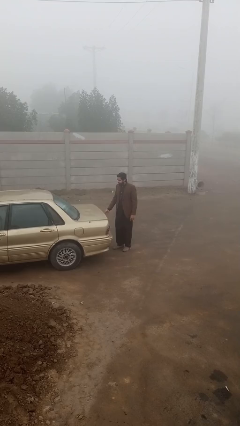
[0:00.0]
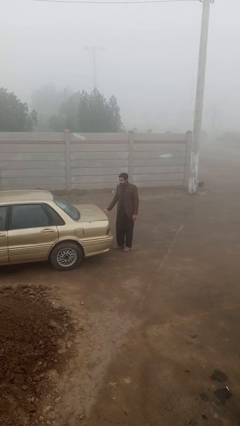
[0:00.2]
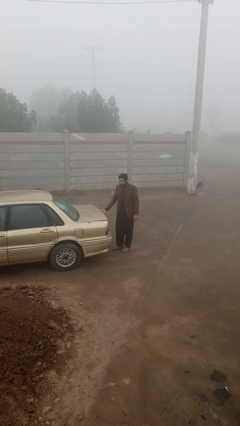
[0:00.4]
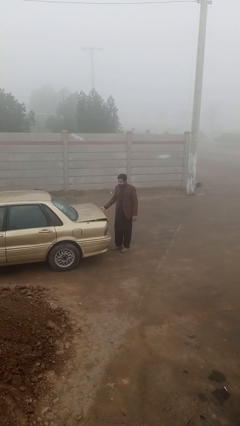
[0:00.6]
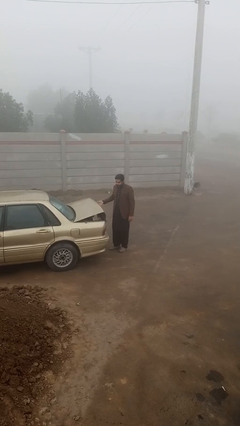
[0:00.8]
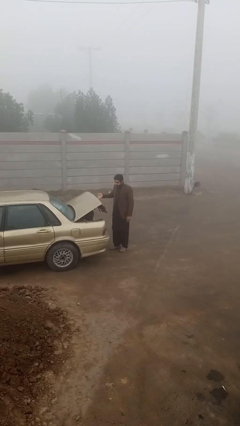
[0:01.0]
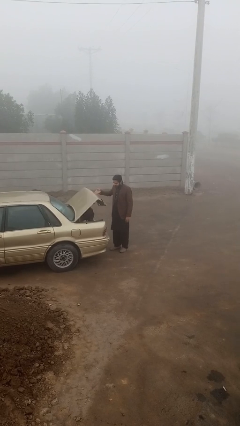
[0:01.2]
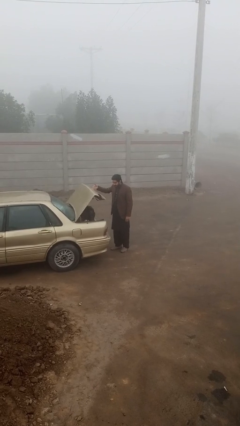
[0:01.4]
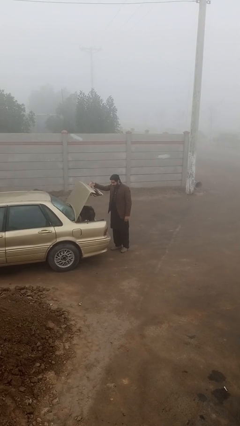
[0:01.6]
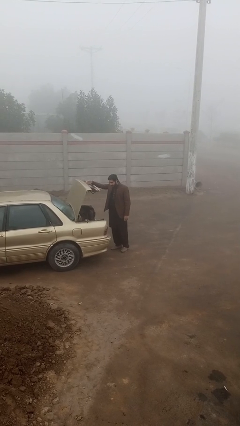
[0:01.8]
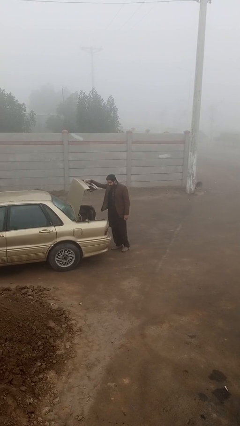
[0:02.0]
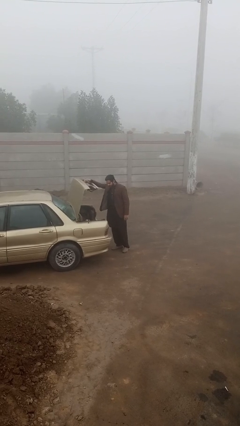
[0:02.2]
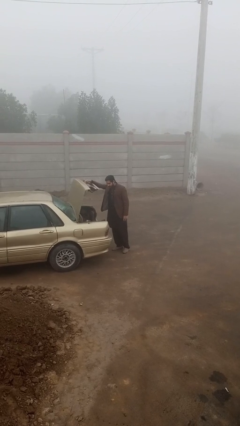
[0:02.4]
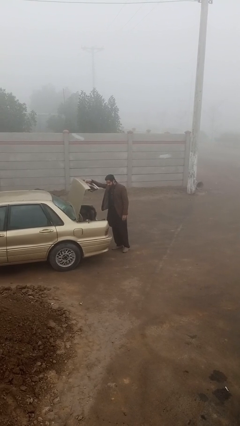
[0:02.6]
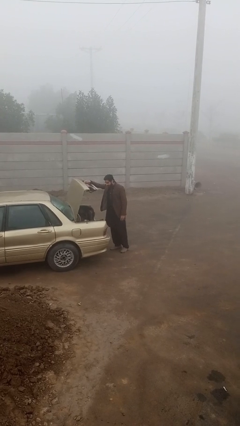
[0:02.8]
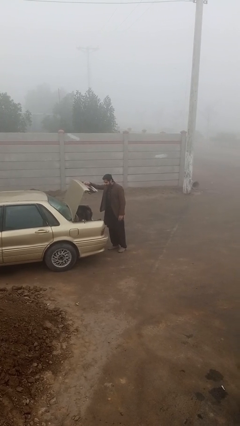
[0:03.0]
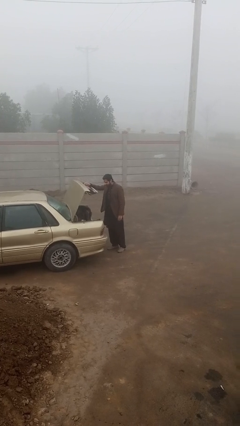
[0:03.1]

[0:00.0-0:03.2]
person opens car trunk

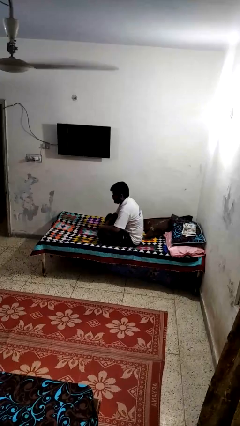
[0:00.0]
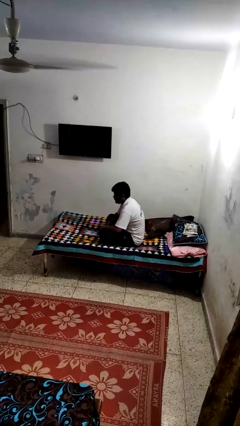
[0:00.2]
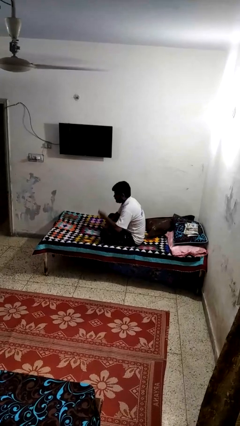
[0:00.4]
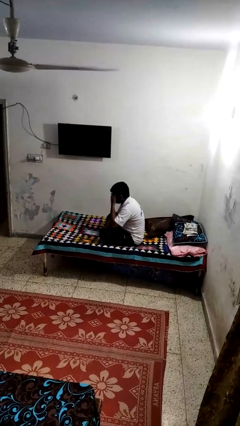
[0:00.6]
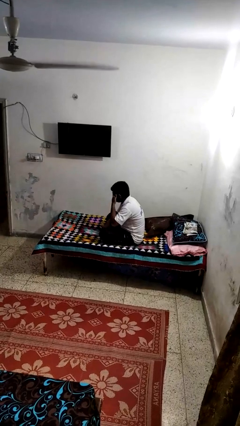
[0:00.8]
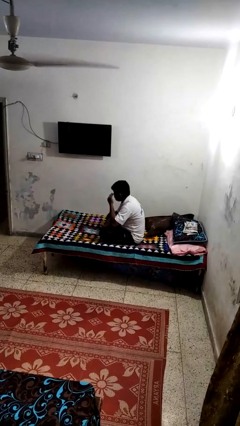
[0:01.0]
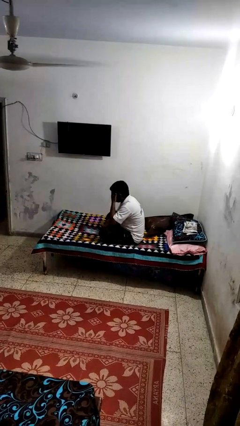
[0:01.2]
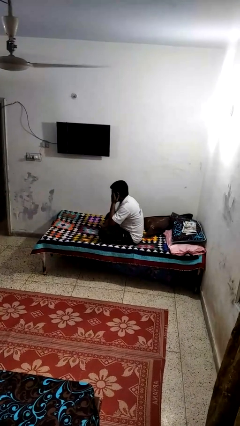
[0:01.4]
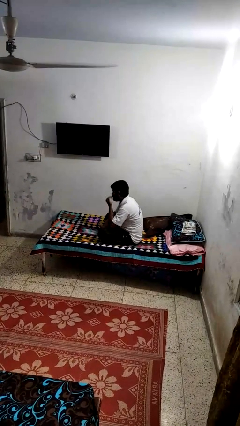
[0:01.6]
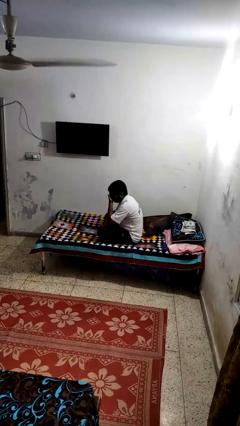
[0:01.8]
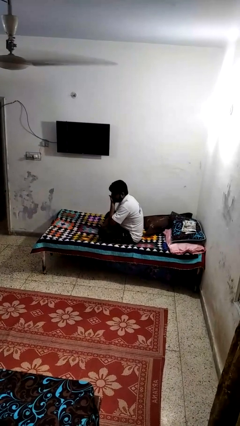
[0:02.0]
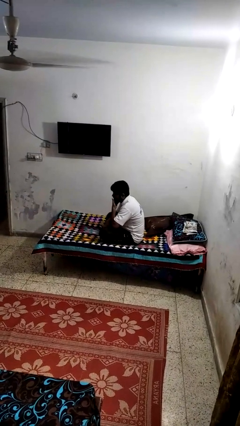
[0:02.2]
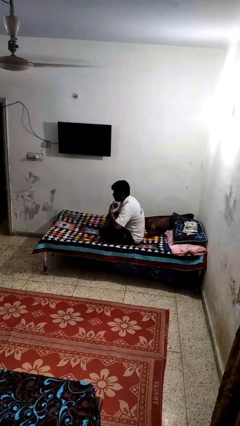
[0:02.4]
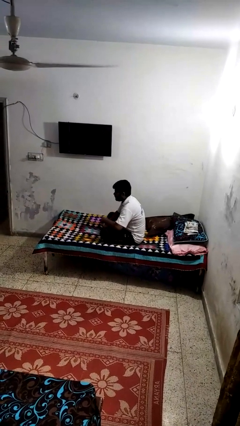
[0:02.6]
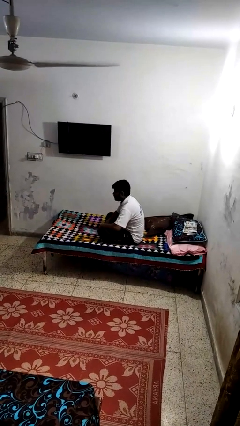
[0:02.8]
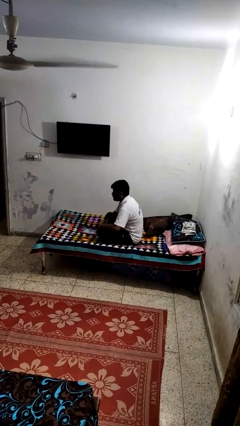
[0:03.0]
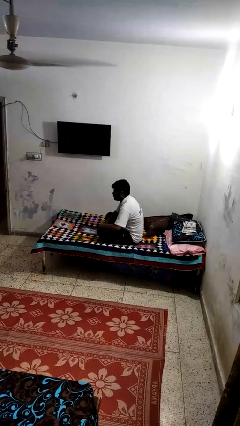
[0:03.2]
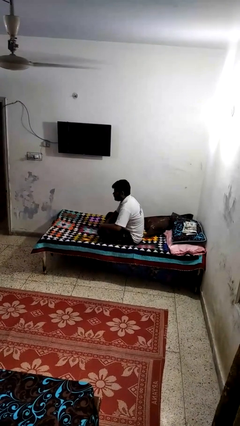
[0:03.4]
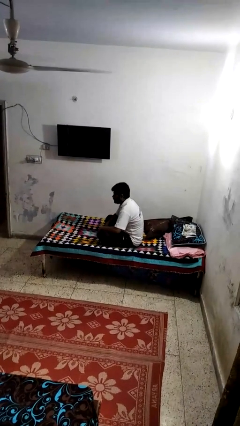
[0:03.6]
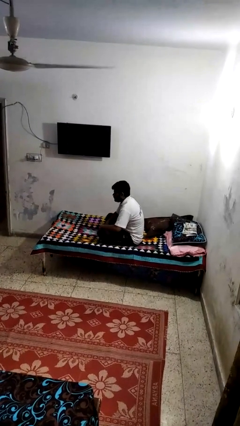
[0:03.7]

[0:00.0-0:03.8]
person scratches face

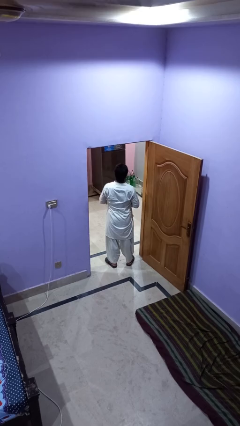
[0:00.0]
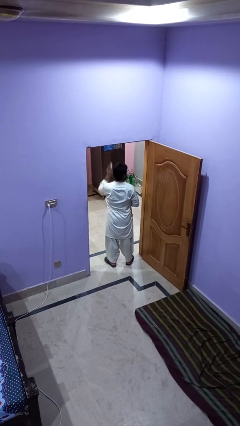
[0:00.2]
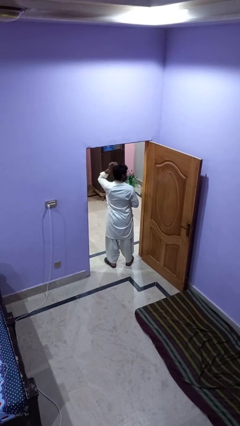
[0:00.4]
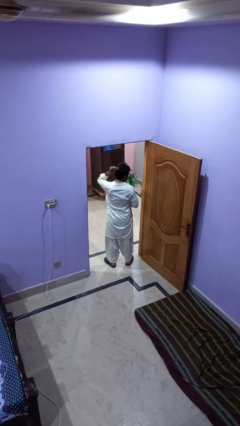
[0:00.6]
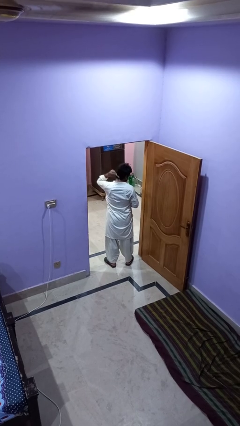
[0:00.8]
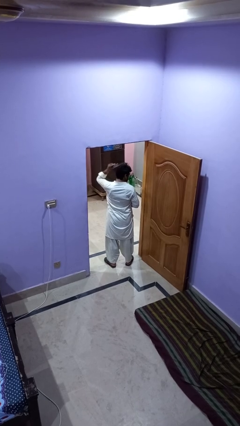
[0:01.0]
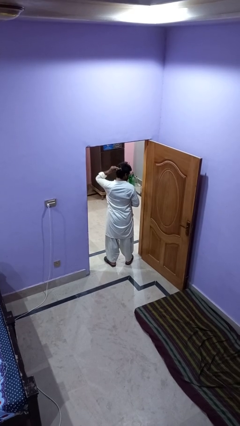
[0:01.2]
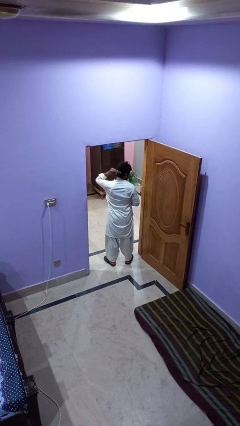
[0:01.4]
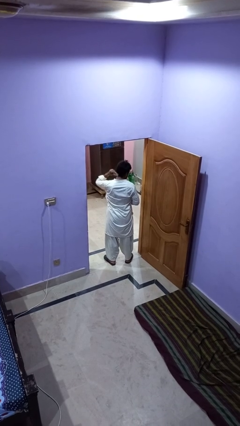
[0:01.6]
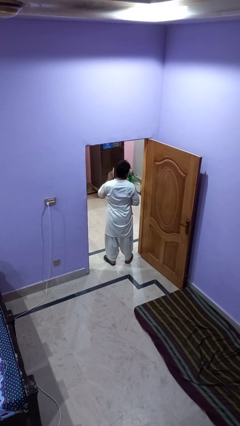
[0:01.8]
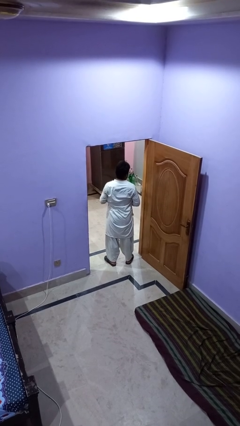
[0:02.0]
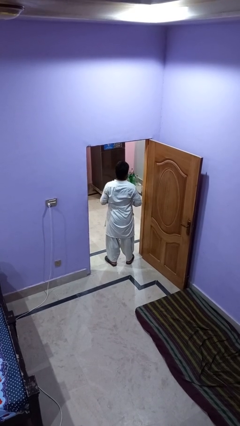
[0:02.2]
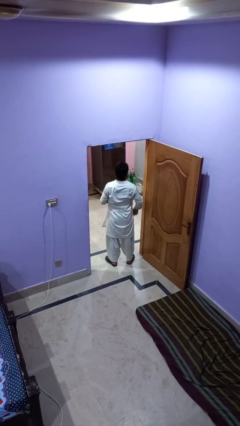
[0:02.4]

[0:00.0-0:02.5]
person brushes hair

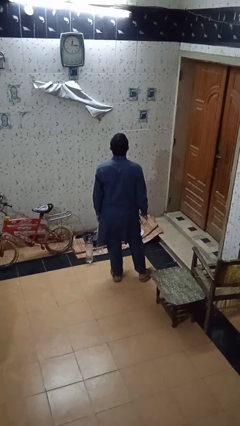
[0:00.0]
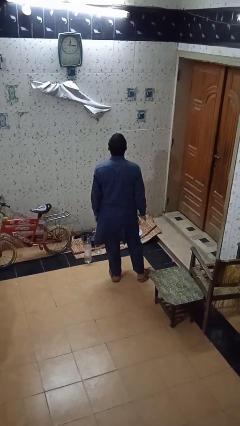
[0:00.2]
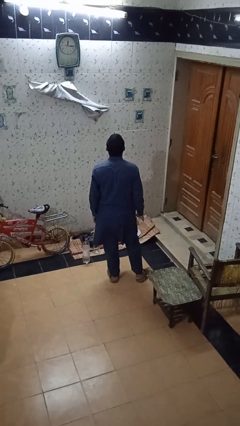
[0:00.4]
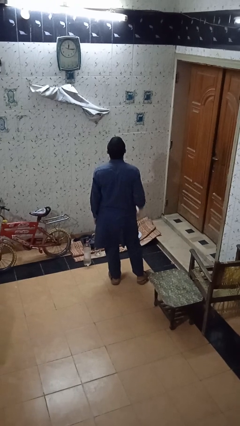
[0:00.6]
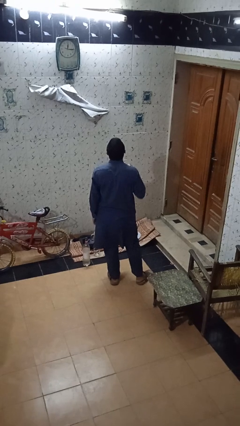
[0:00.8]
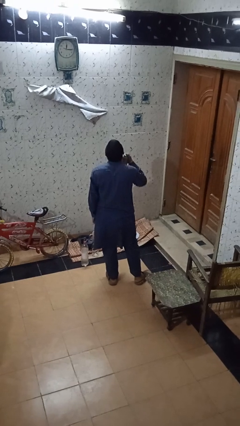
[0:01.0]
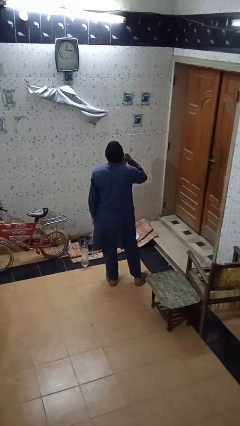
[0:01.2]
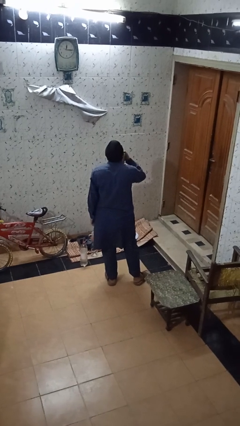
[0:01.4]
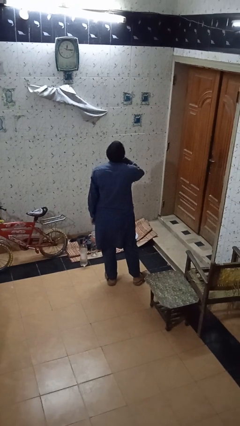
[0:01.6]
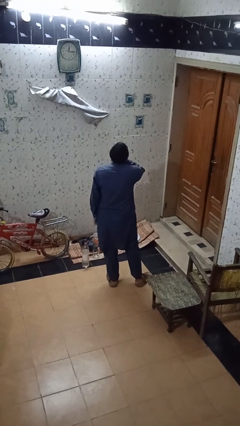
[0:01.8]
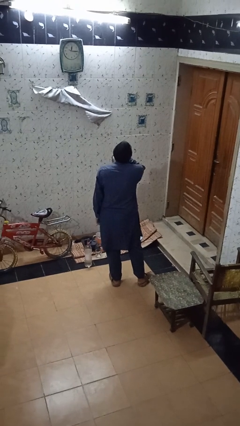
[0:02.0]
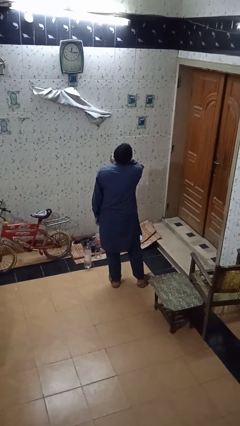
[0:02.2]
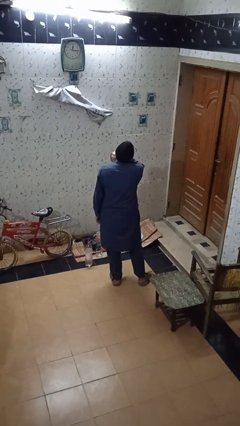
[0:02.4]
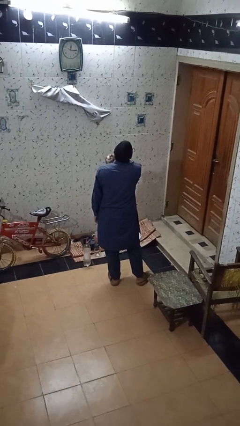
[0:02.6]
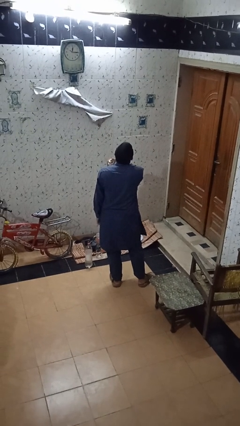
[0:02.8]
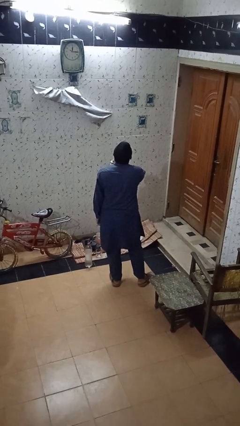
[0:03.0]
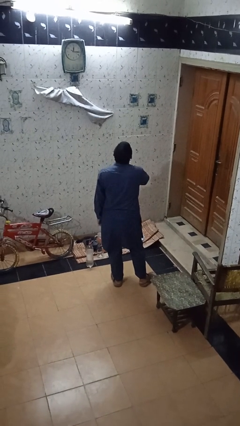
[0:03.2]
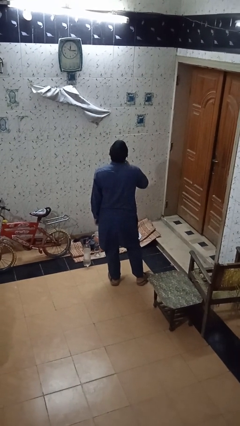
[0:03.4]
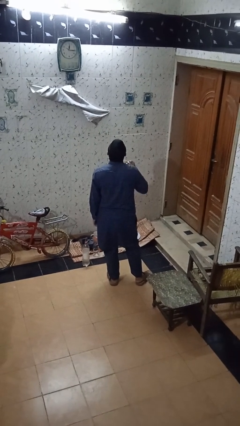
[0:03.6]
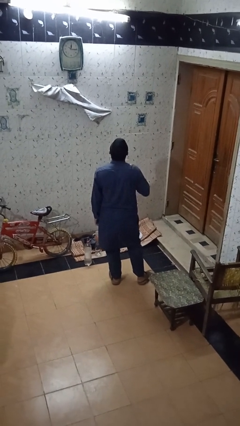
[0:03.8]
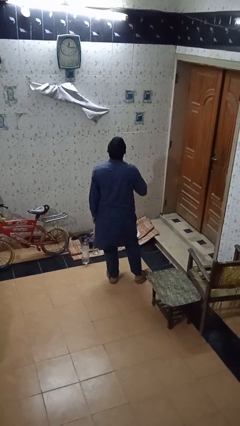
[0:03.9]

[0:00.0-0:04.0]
person applies deodorant

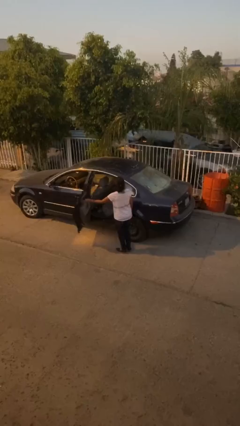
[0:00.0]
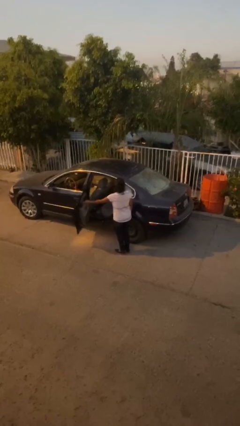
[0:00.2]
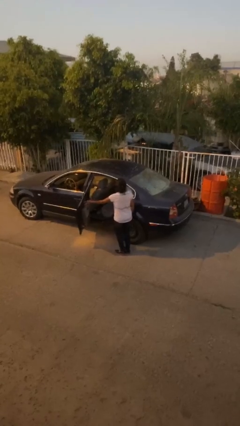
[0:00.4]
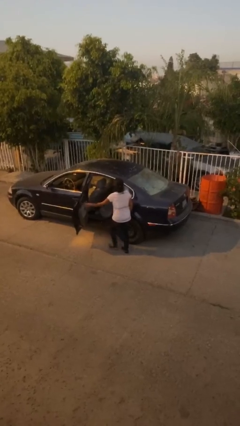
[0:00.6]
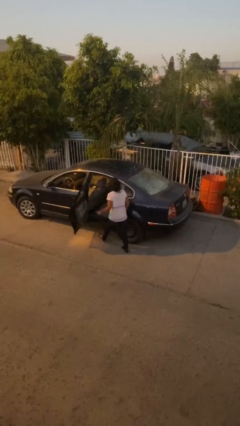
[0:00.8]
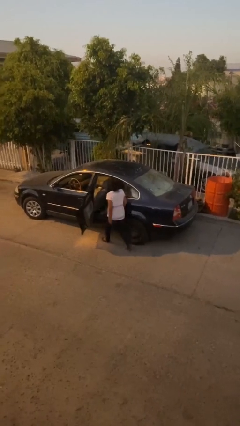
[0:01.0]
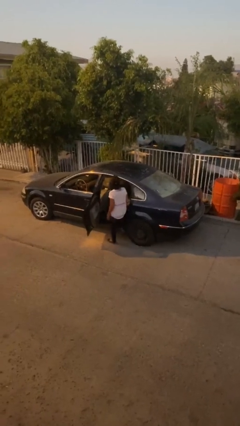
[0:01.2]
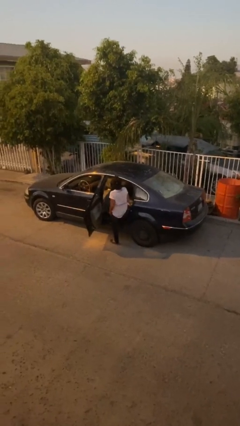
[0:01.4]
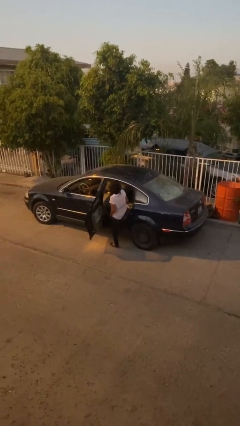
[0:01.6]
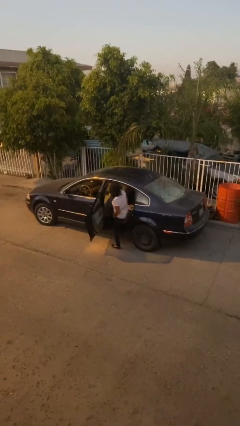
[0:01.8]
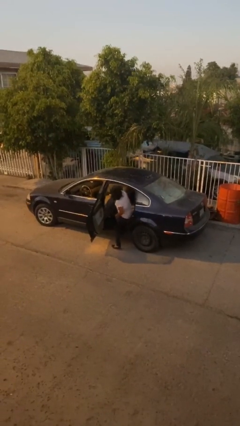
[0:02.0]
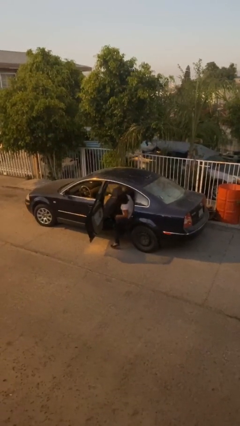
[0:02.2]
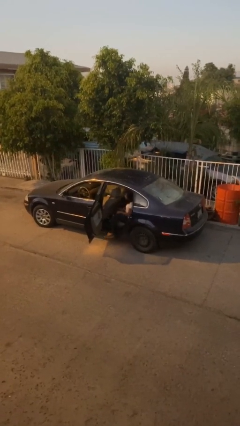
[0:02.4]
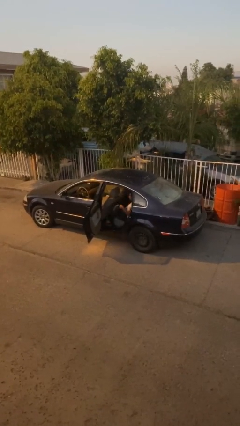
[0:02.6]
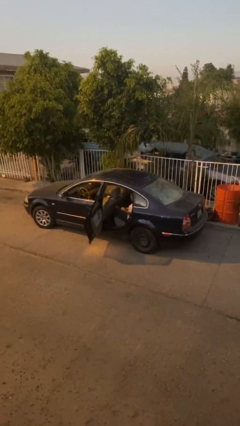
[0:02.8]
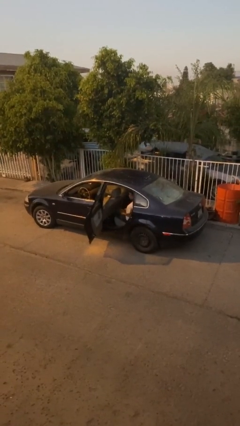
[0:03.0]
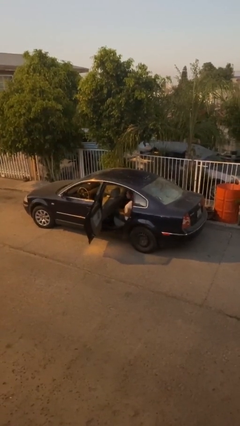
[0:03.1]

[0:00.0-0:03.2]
person enters car

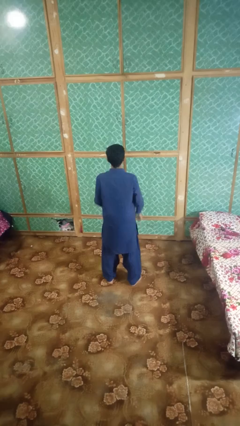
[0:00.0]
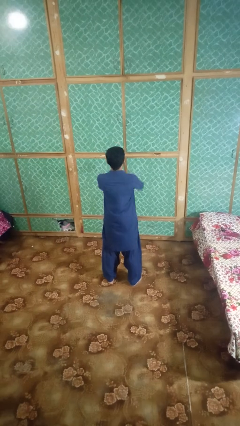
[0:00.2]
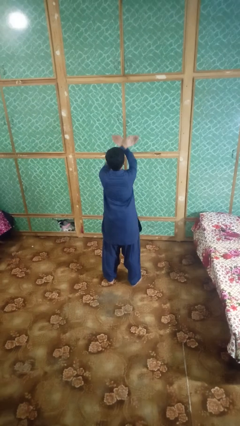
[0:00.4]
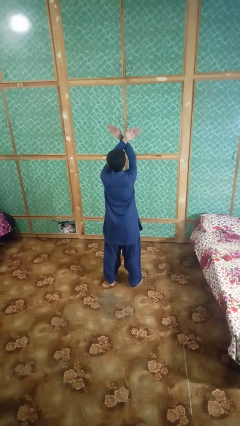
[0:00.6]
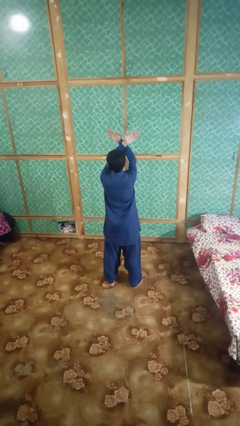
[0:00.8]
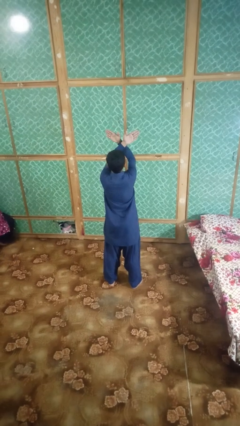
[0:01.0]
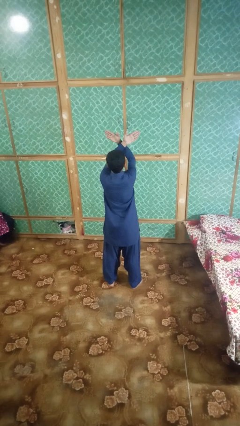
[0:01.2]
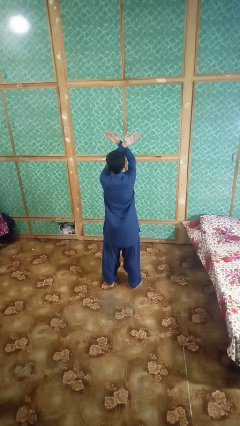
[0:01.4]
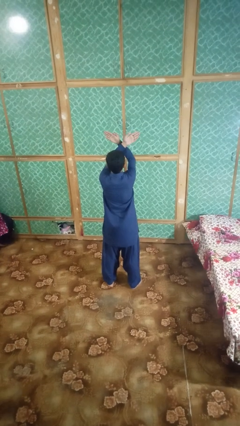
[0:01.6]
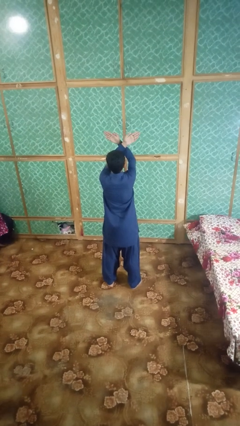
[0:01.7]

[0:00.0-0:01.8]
person gestures arms x
